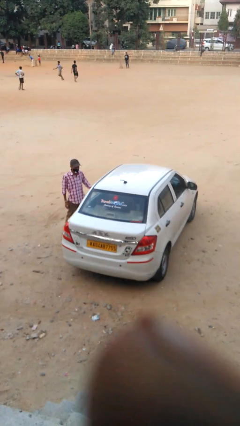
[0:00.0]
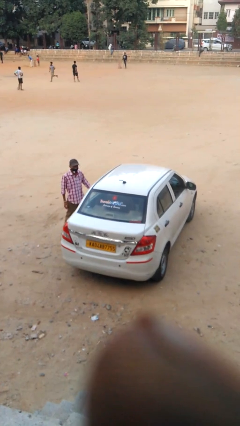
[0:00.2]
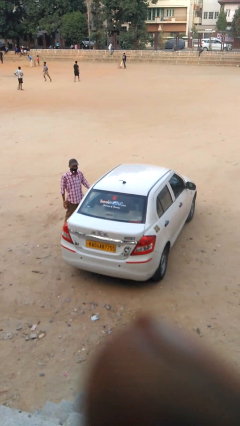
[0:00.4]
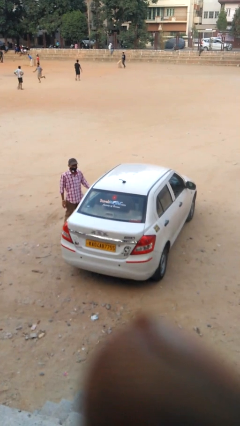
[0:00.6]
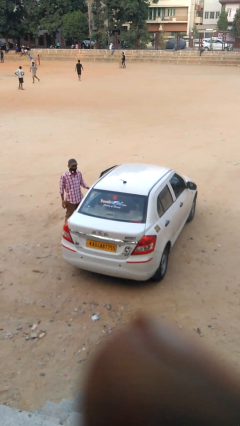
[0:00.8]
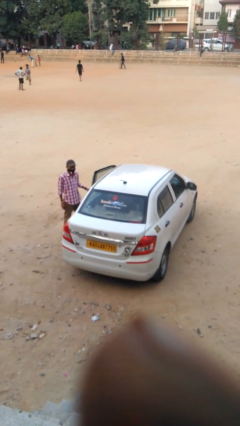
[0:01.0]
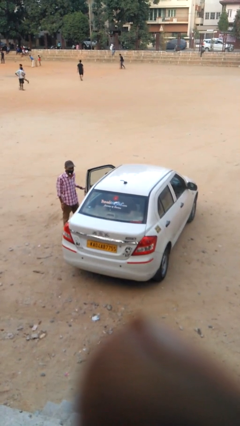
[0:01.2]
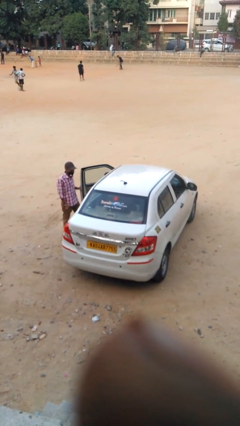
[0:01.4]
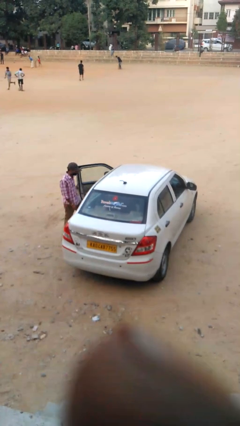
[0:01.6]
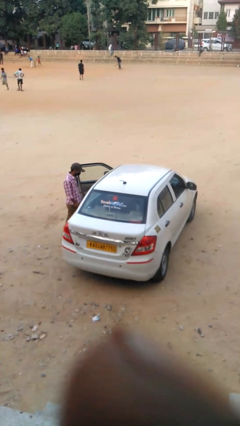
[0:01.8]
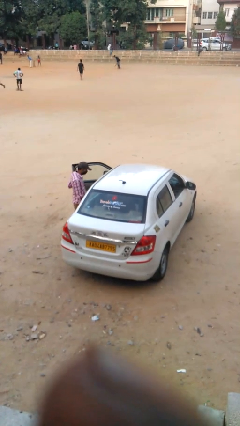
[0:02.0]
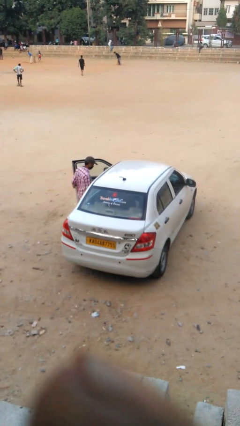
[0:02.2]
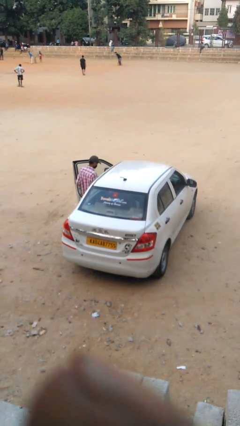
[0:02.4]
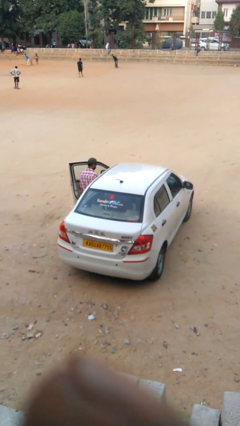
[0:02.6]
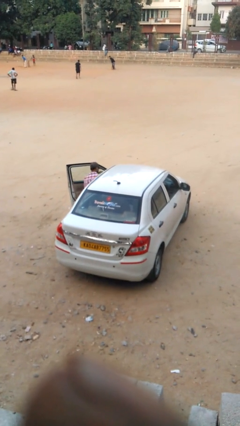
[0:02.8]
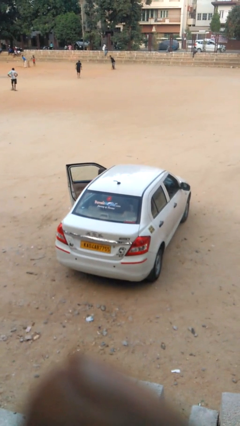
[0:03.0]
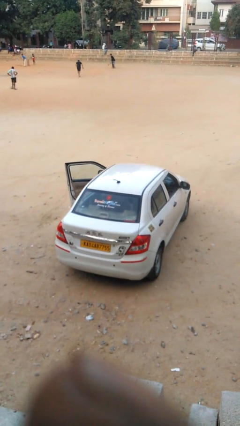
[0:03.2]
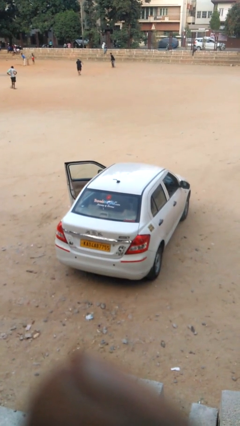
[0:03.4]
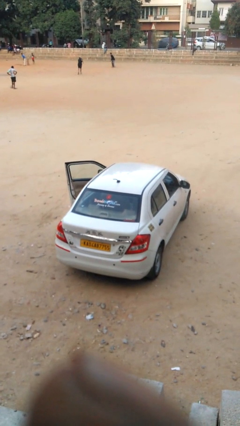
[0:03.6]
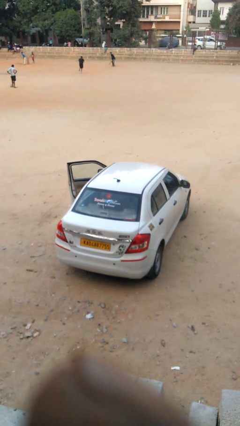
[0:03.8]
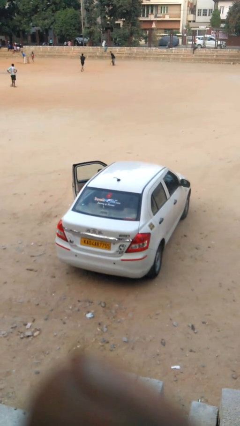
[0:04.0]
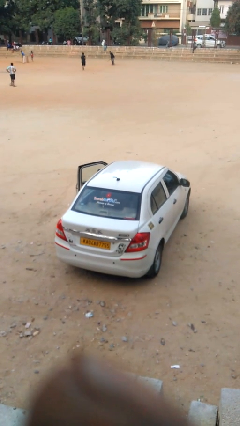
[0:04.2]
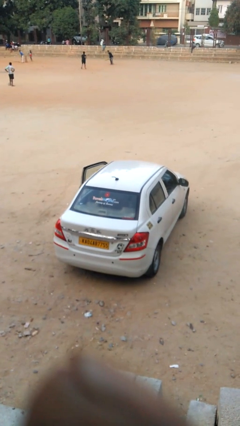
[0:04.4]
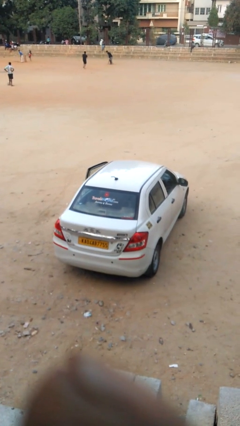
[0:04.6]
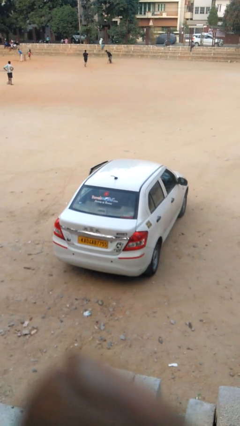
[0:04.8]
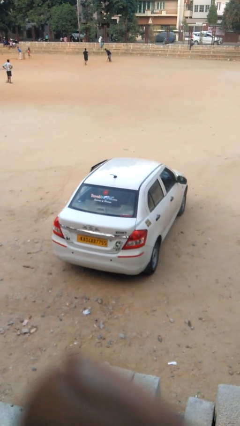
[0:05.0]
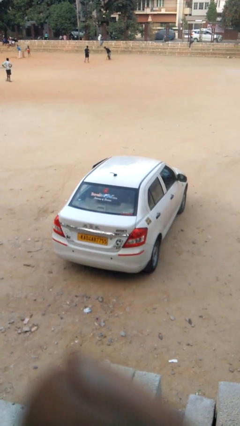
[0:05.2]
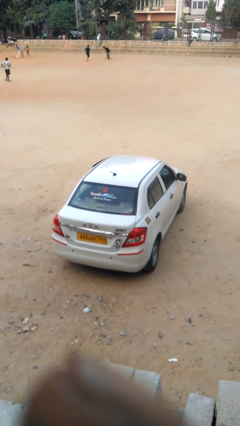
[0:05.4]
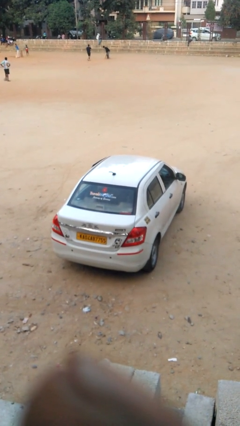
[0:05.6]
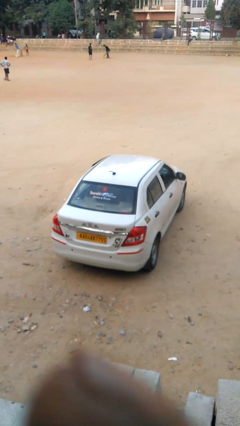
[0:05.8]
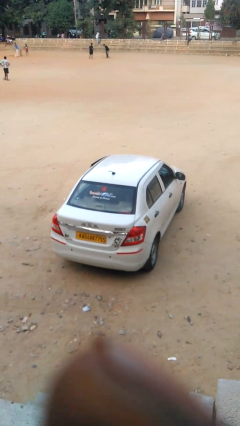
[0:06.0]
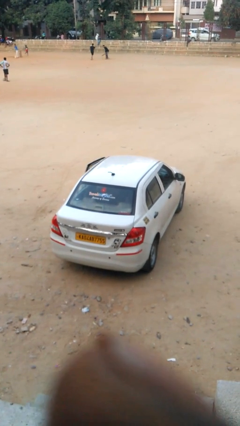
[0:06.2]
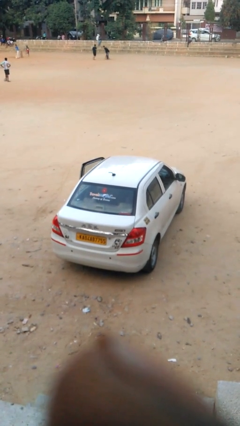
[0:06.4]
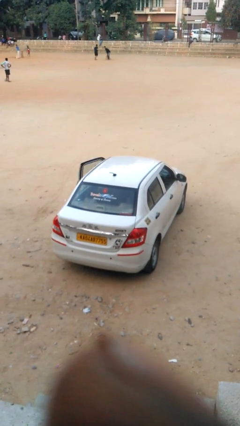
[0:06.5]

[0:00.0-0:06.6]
car picks up person

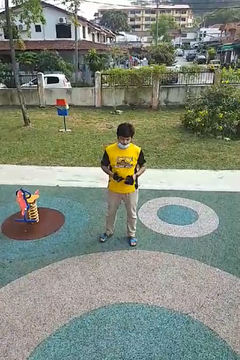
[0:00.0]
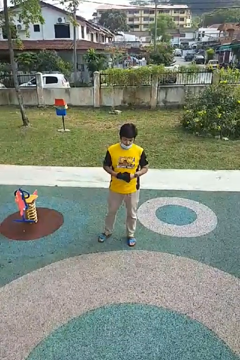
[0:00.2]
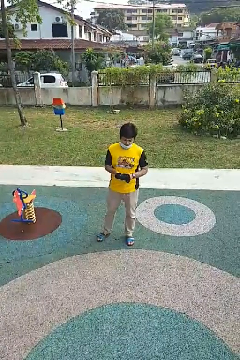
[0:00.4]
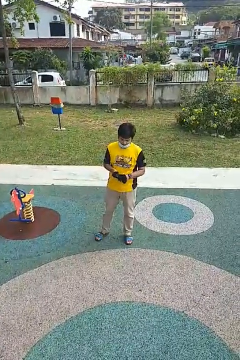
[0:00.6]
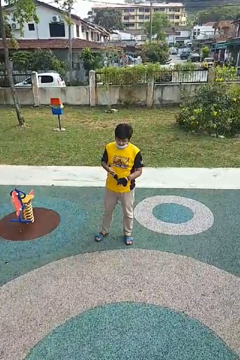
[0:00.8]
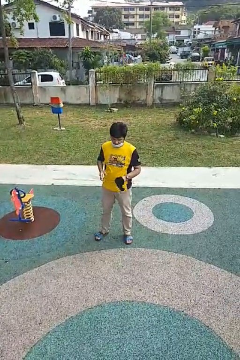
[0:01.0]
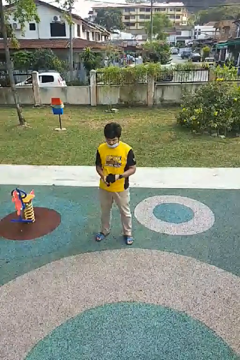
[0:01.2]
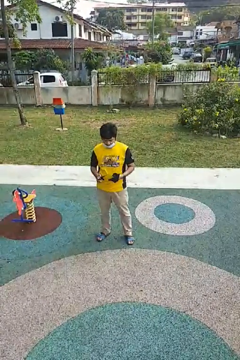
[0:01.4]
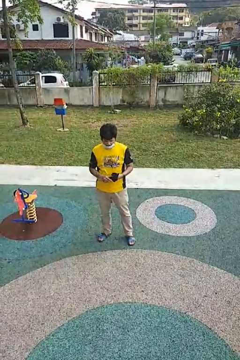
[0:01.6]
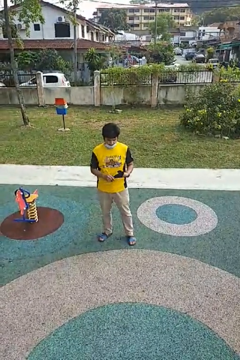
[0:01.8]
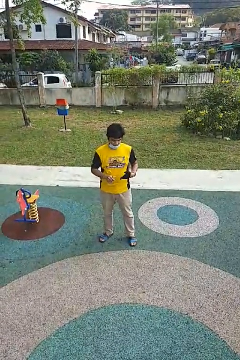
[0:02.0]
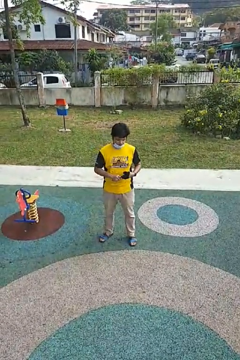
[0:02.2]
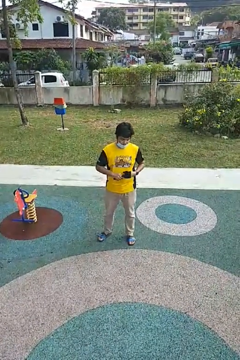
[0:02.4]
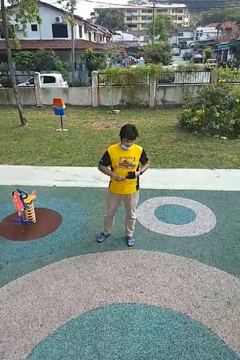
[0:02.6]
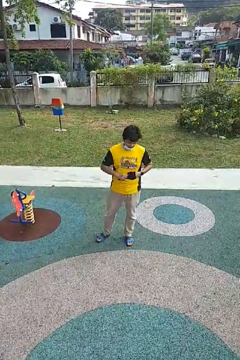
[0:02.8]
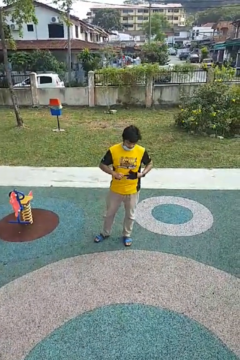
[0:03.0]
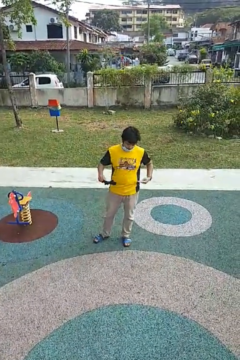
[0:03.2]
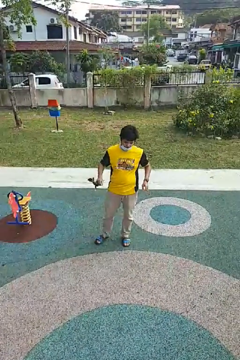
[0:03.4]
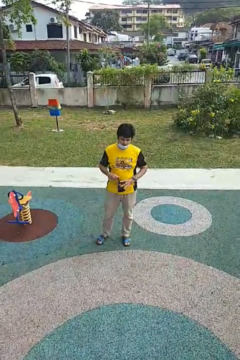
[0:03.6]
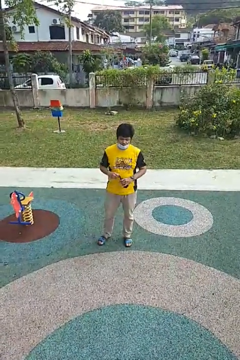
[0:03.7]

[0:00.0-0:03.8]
person takes off gloves

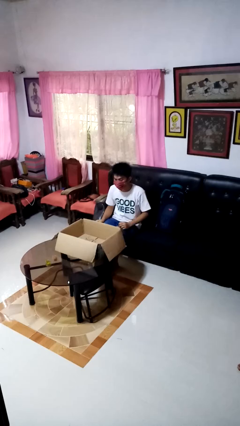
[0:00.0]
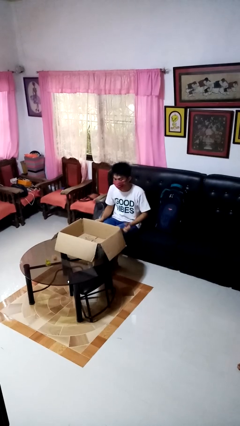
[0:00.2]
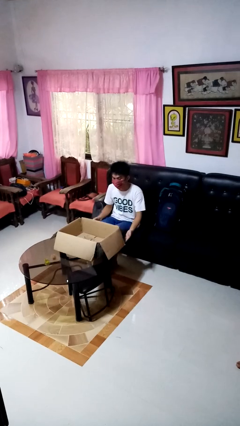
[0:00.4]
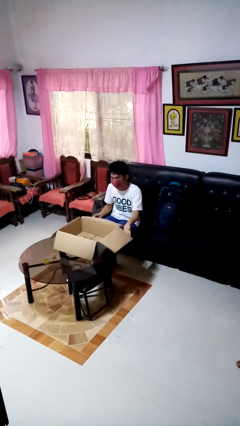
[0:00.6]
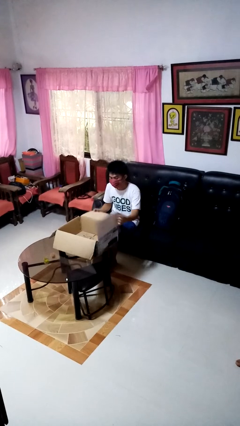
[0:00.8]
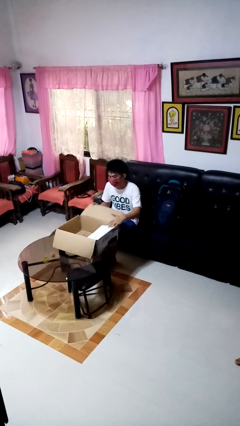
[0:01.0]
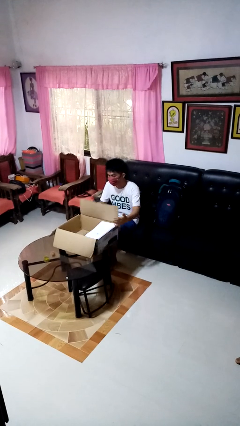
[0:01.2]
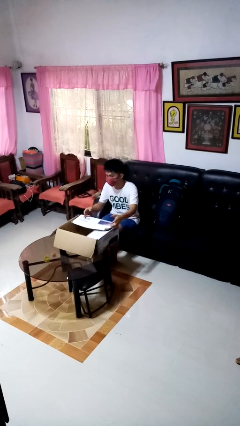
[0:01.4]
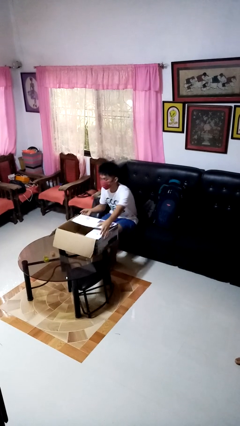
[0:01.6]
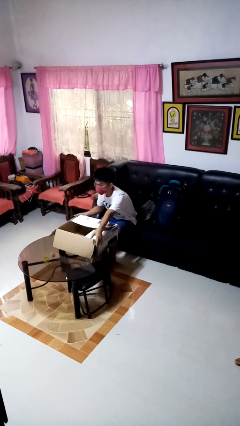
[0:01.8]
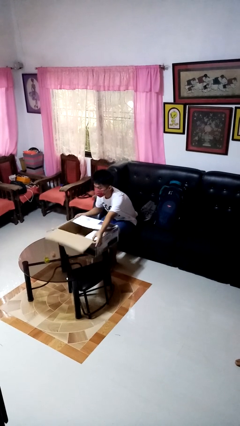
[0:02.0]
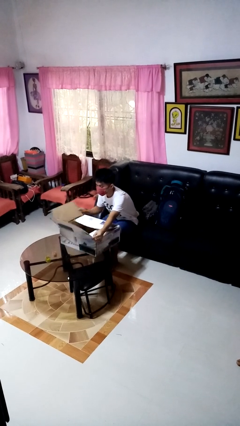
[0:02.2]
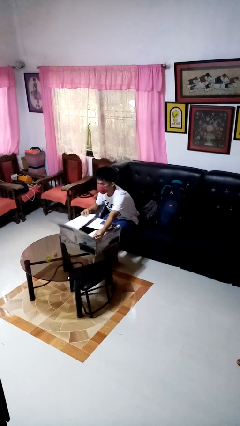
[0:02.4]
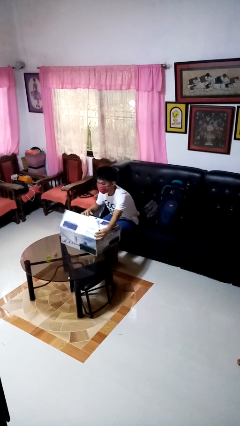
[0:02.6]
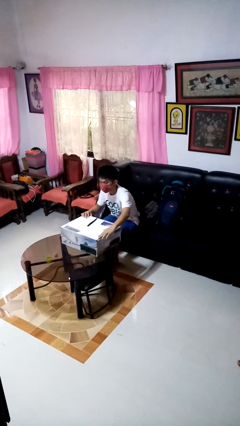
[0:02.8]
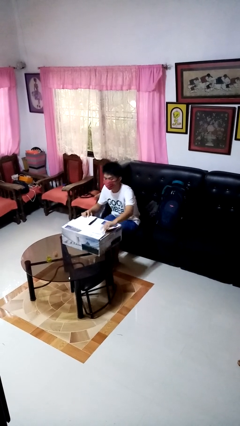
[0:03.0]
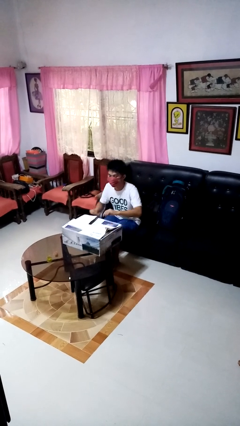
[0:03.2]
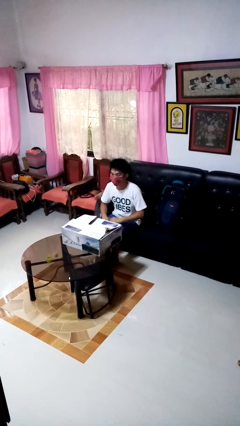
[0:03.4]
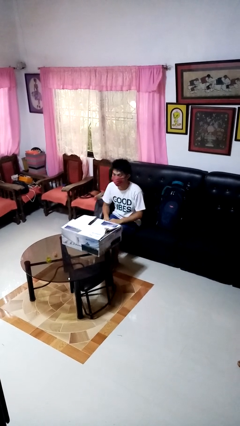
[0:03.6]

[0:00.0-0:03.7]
person closes box

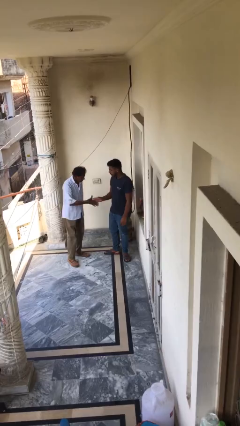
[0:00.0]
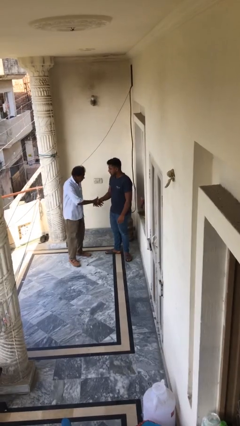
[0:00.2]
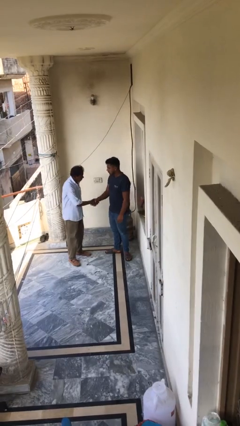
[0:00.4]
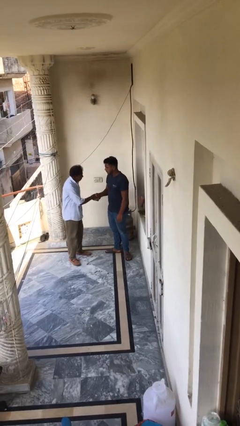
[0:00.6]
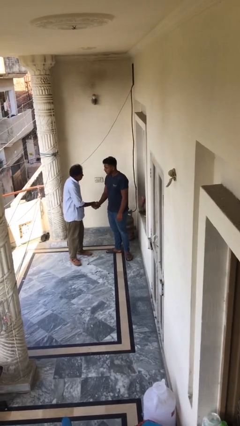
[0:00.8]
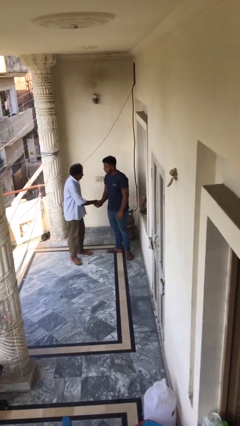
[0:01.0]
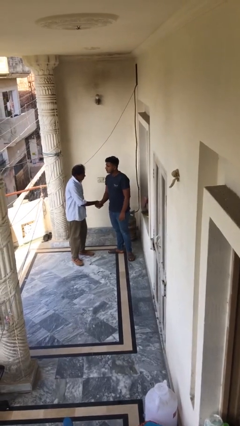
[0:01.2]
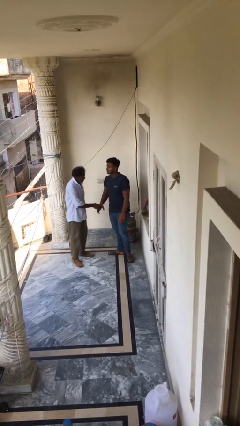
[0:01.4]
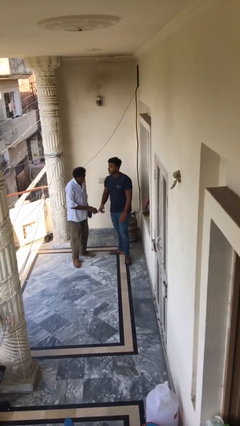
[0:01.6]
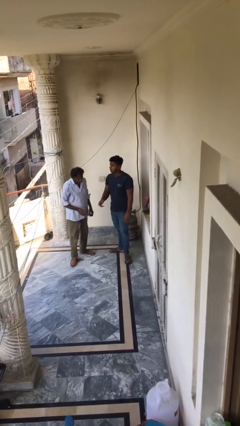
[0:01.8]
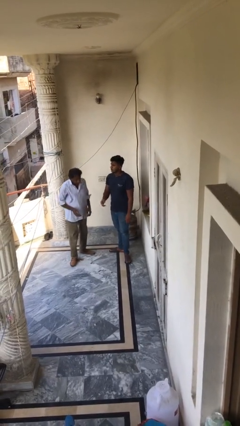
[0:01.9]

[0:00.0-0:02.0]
person shakes hand

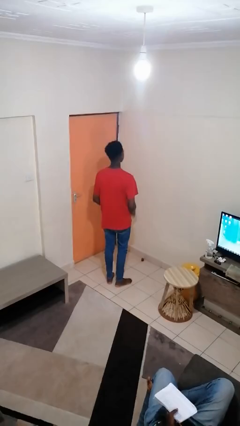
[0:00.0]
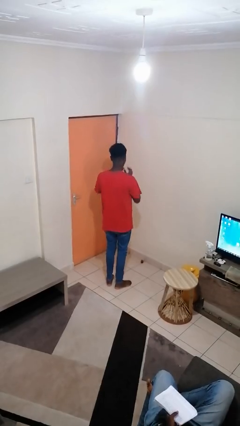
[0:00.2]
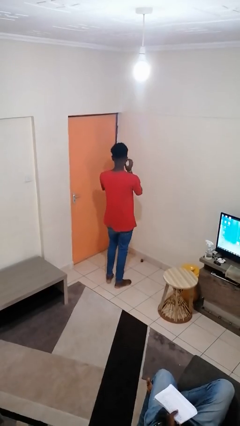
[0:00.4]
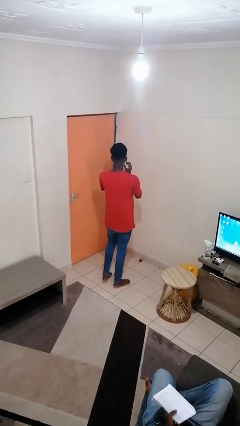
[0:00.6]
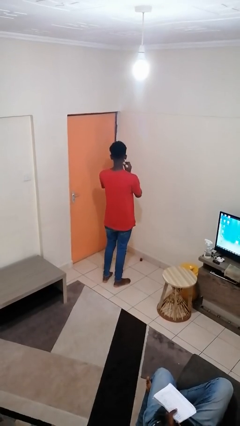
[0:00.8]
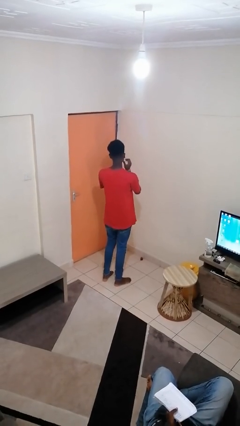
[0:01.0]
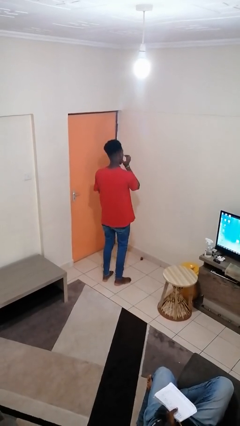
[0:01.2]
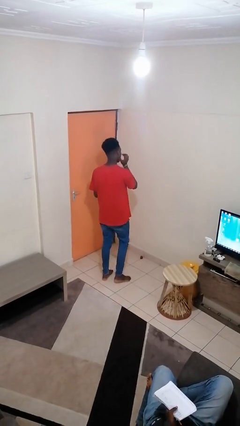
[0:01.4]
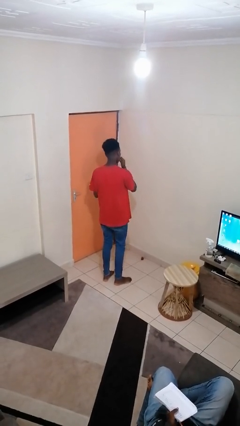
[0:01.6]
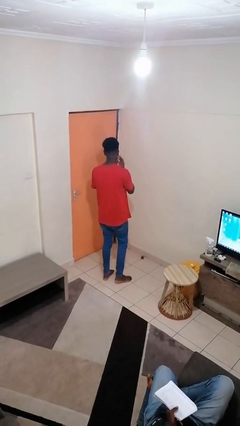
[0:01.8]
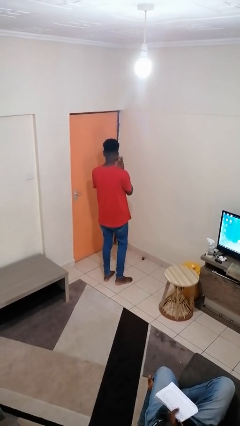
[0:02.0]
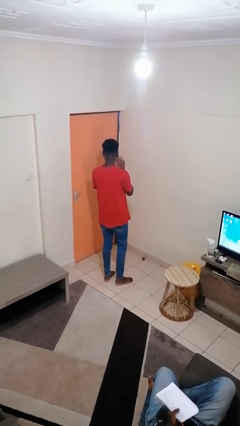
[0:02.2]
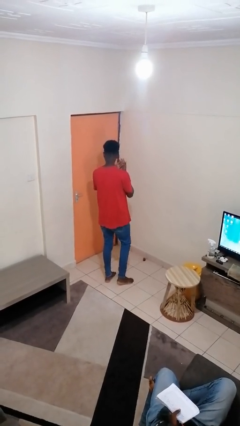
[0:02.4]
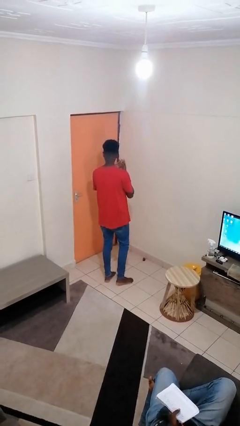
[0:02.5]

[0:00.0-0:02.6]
person licks fingers
